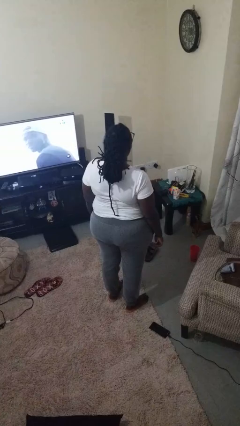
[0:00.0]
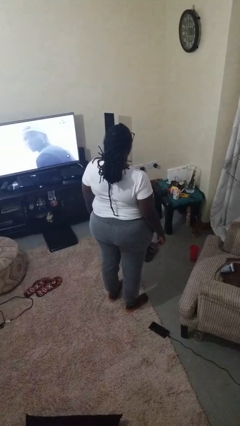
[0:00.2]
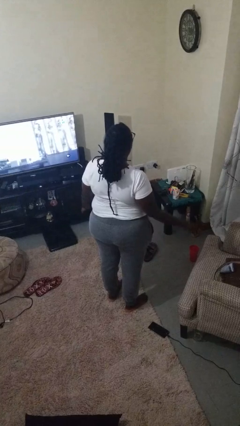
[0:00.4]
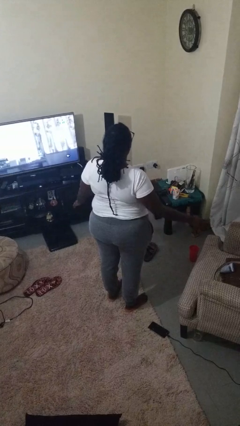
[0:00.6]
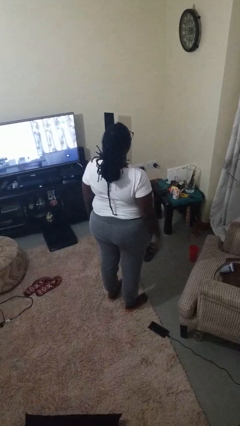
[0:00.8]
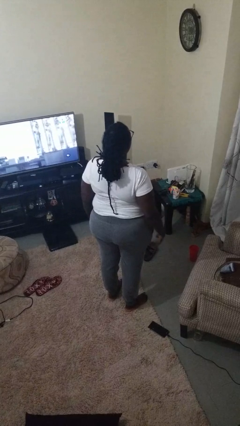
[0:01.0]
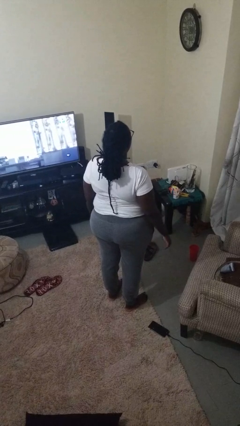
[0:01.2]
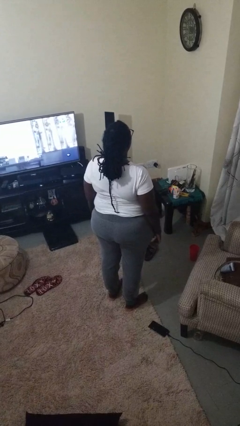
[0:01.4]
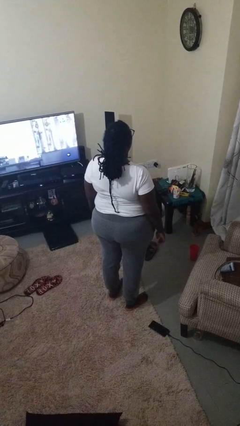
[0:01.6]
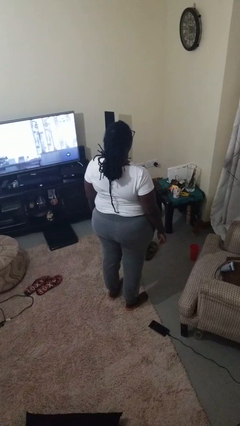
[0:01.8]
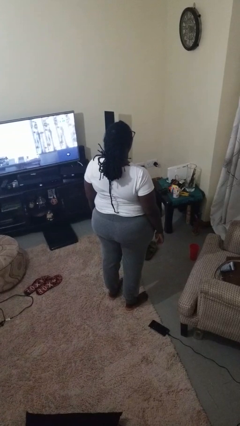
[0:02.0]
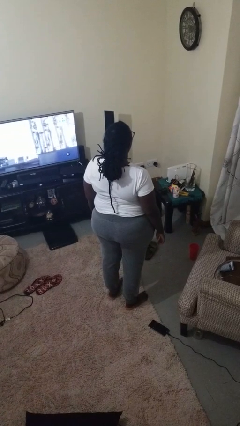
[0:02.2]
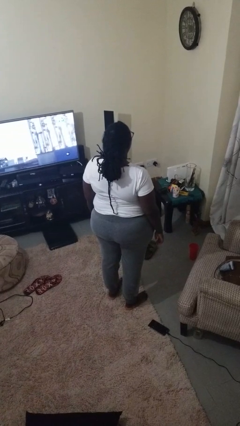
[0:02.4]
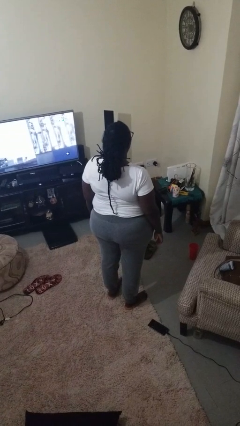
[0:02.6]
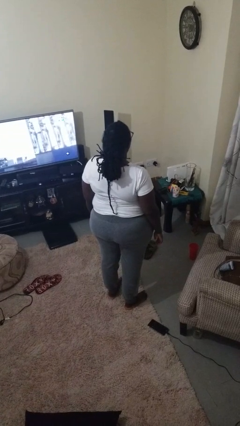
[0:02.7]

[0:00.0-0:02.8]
person slaps hands on thighs

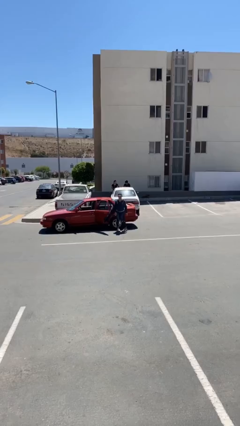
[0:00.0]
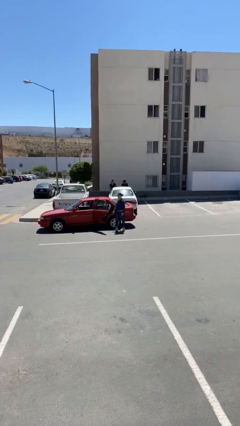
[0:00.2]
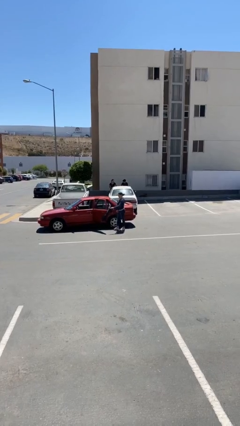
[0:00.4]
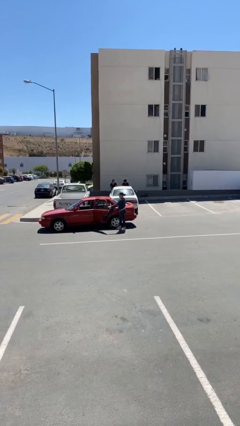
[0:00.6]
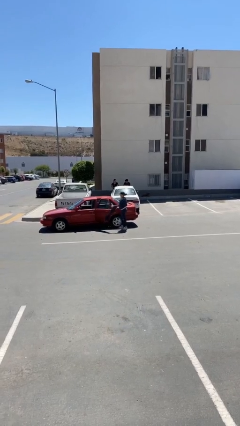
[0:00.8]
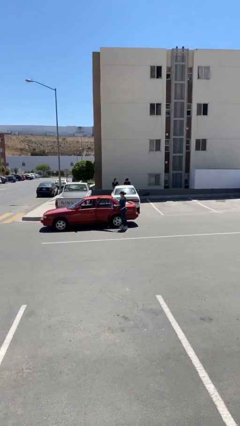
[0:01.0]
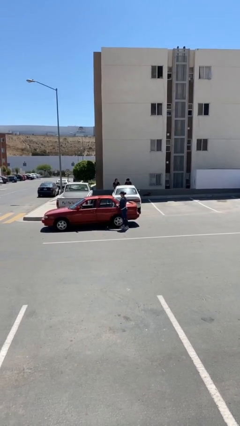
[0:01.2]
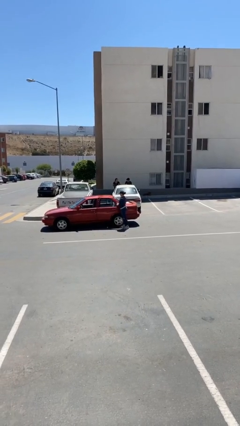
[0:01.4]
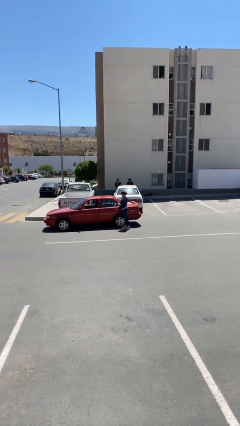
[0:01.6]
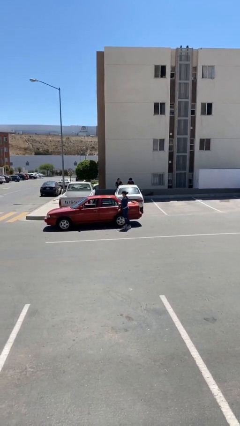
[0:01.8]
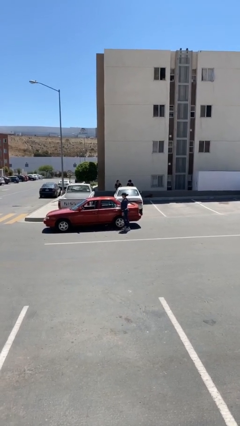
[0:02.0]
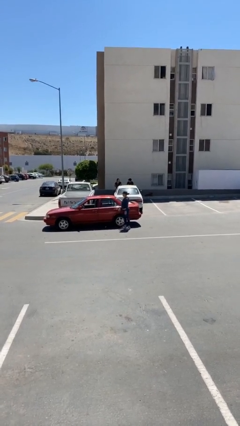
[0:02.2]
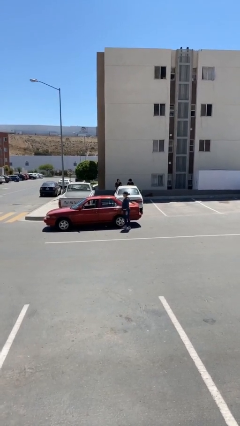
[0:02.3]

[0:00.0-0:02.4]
person closes car door

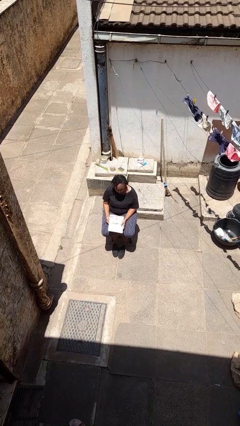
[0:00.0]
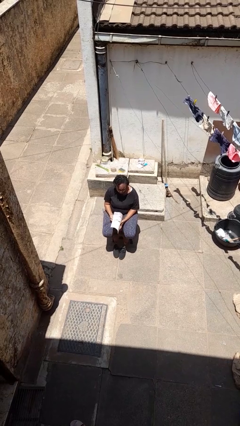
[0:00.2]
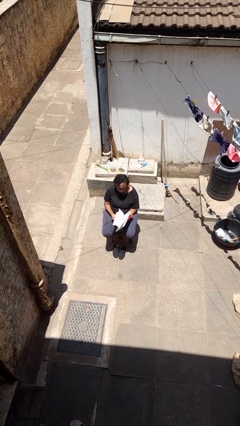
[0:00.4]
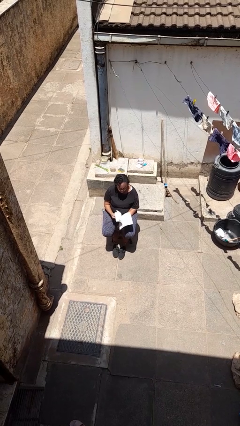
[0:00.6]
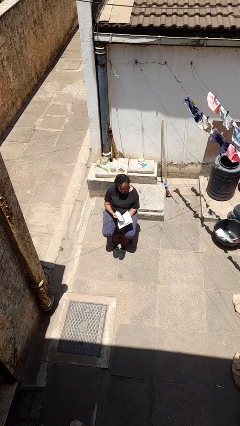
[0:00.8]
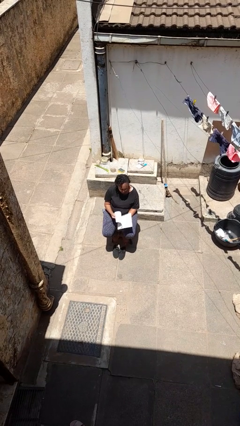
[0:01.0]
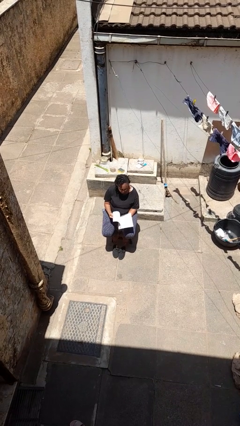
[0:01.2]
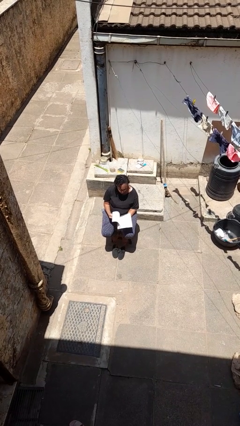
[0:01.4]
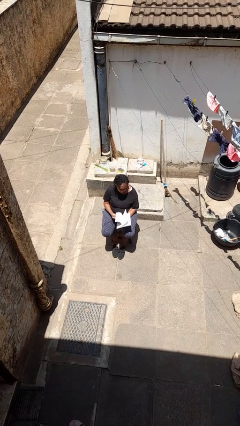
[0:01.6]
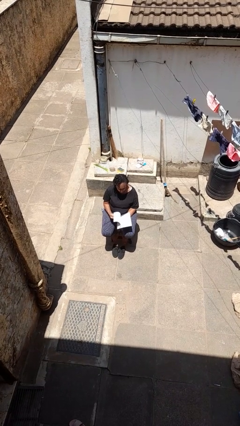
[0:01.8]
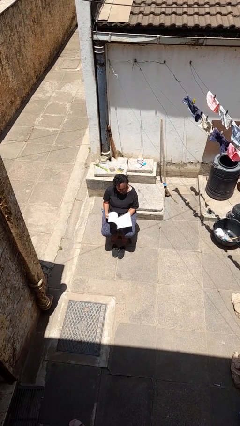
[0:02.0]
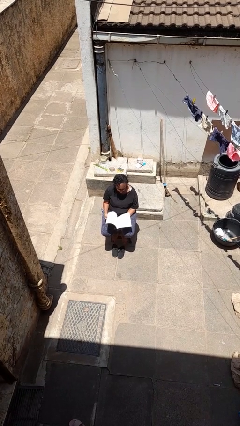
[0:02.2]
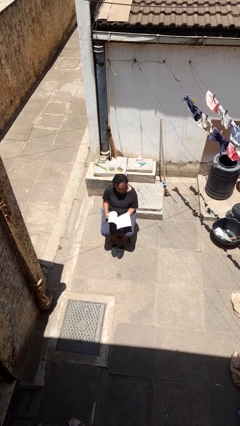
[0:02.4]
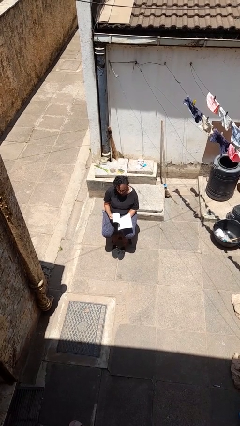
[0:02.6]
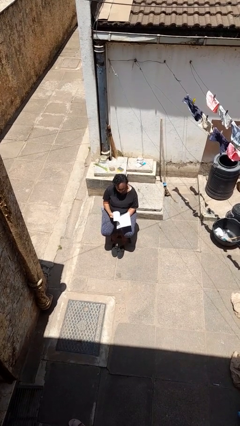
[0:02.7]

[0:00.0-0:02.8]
person reads magazine

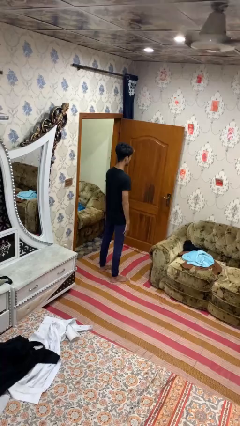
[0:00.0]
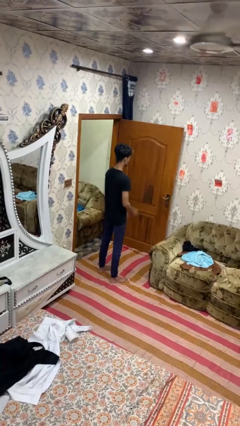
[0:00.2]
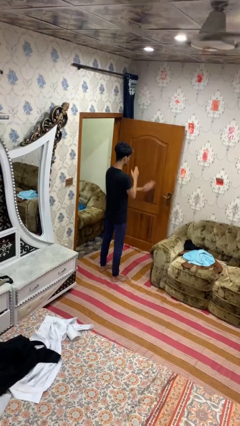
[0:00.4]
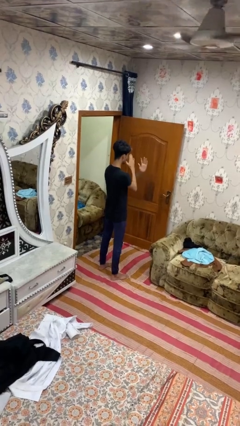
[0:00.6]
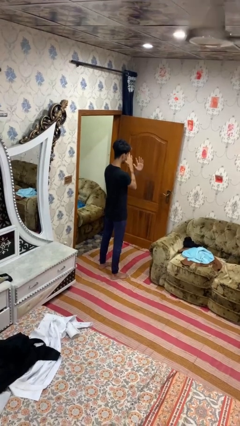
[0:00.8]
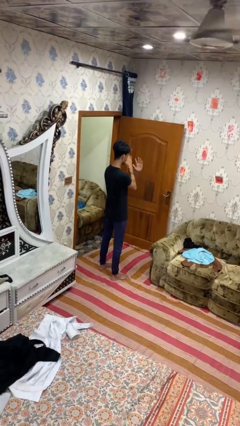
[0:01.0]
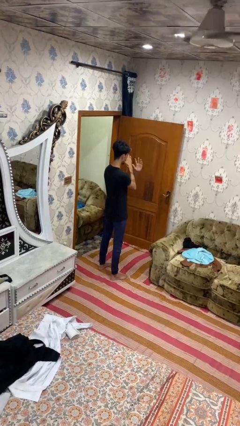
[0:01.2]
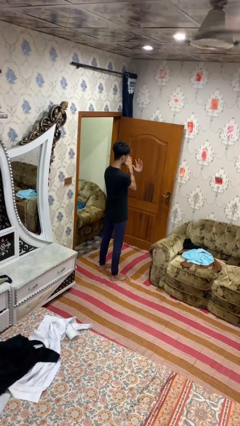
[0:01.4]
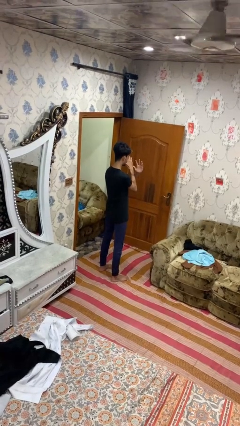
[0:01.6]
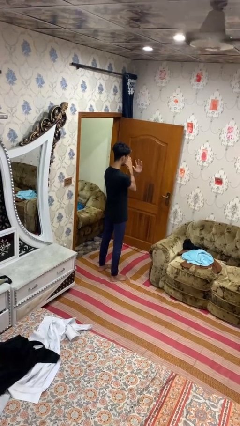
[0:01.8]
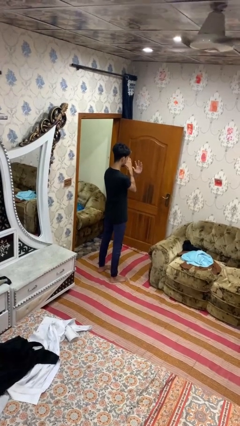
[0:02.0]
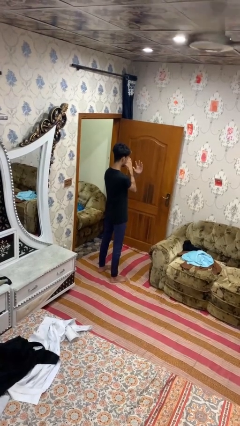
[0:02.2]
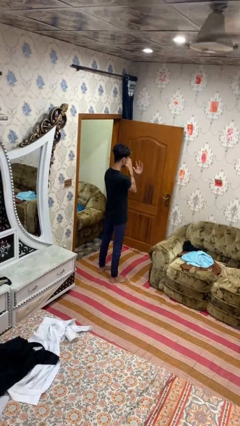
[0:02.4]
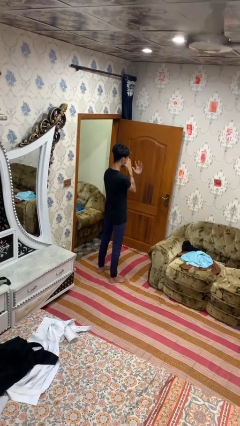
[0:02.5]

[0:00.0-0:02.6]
person gestures arms x

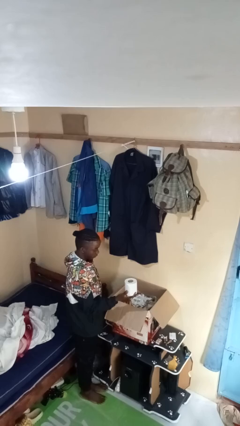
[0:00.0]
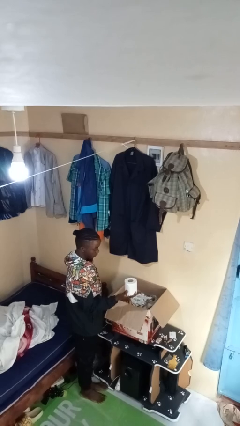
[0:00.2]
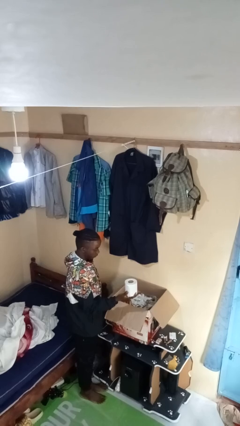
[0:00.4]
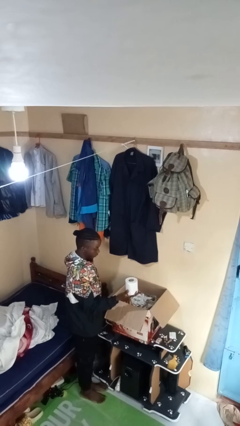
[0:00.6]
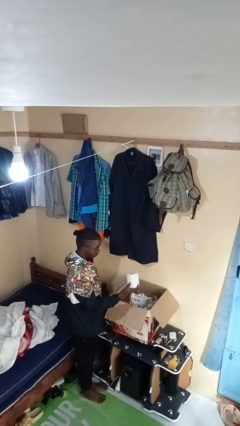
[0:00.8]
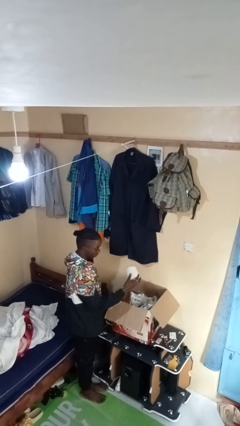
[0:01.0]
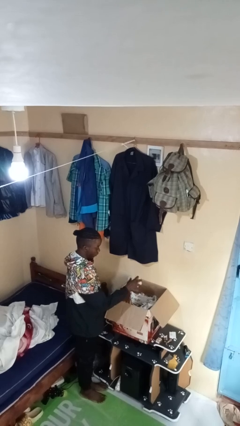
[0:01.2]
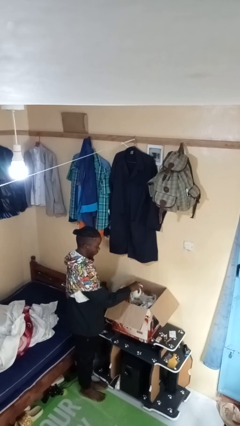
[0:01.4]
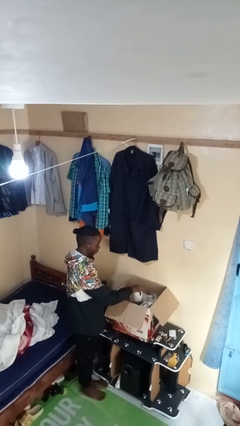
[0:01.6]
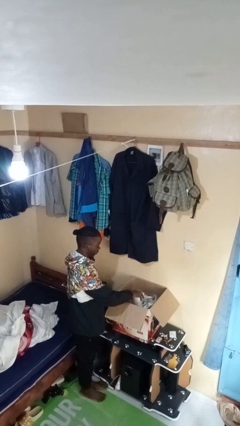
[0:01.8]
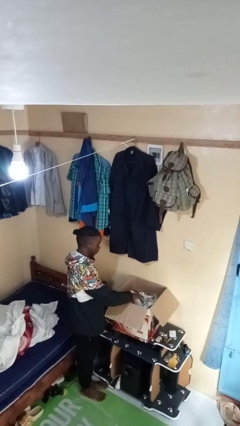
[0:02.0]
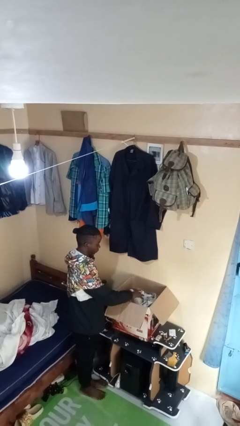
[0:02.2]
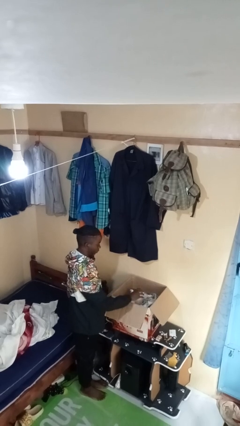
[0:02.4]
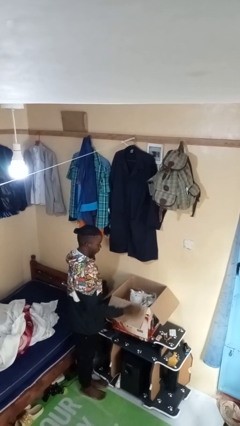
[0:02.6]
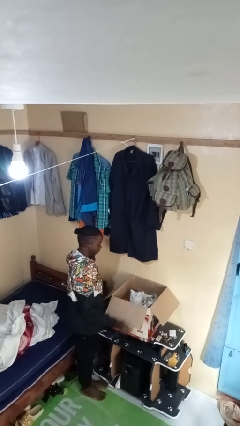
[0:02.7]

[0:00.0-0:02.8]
person puts object into box

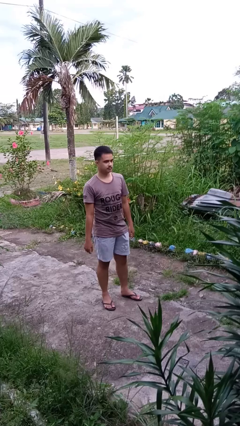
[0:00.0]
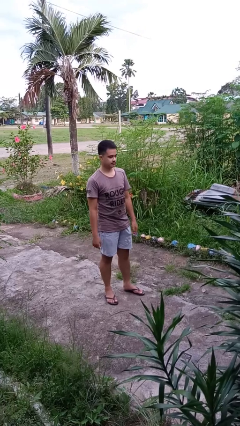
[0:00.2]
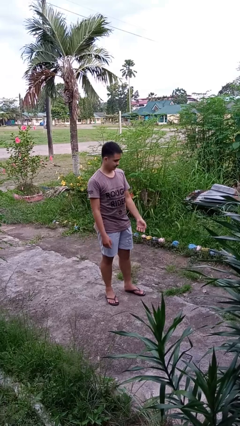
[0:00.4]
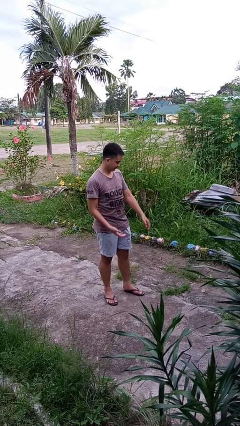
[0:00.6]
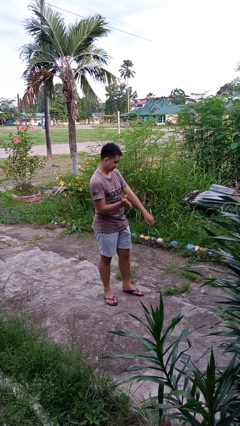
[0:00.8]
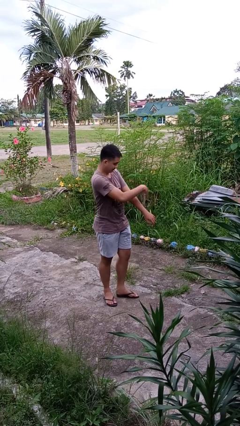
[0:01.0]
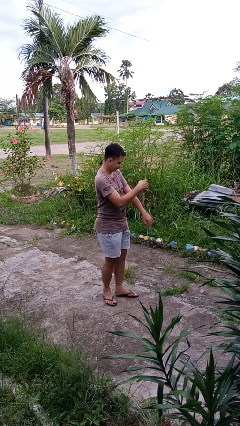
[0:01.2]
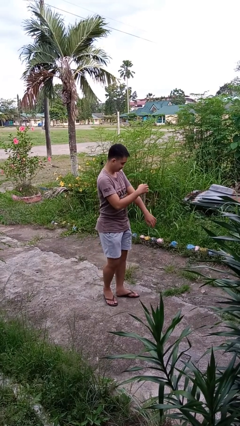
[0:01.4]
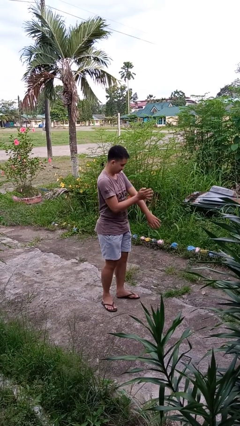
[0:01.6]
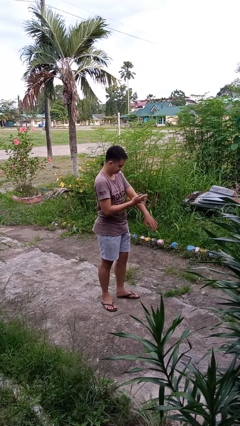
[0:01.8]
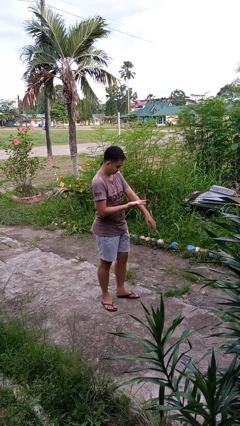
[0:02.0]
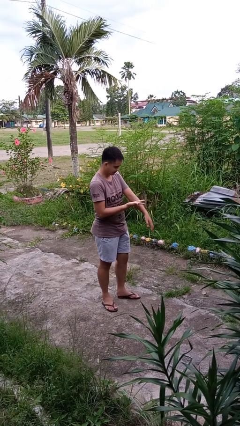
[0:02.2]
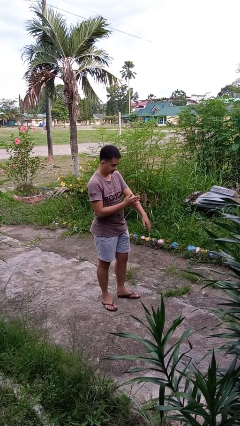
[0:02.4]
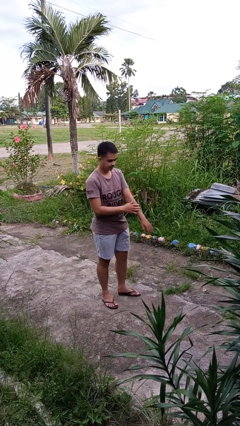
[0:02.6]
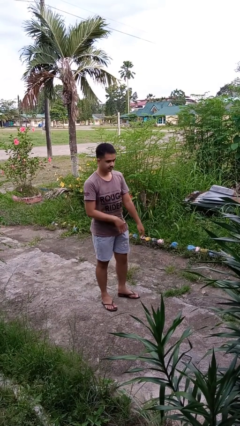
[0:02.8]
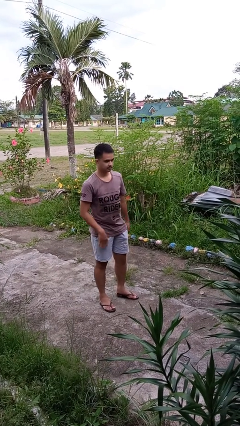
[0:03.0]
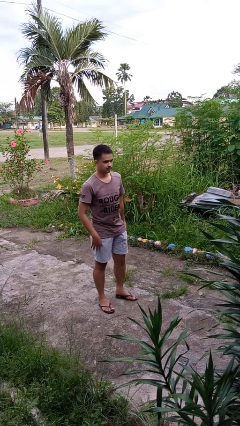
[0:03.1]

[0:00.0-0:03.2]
person swats bug

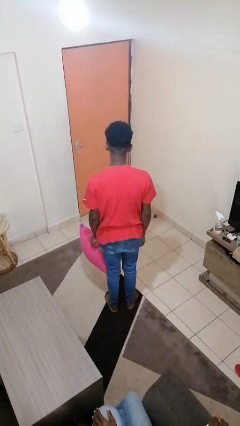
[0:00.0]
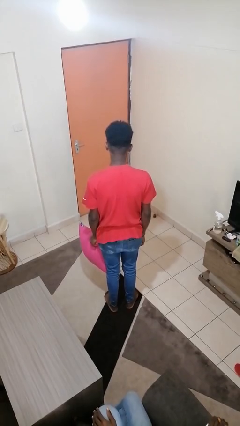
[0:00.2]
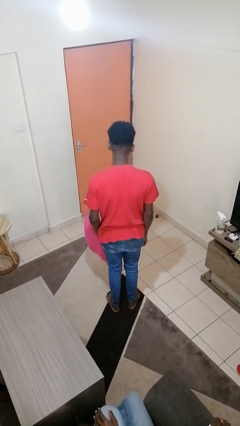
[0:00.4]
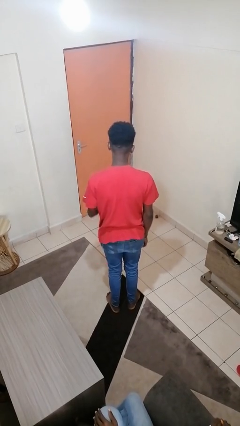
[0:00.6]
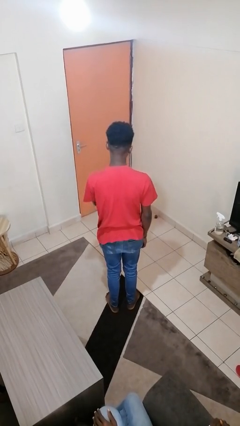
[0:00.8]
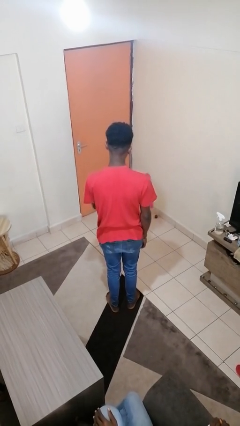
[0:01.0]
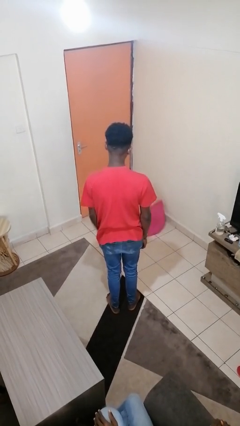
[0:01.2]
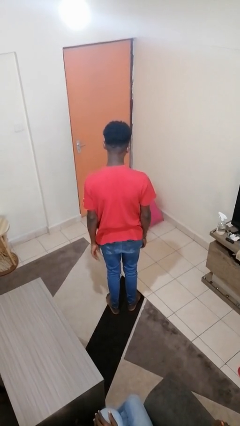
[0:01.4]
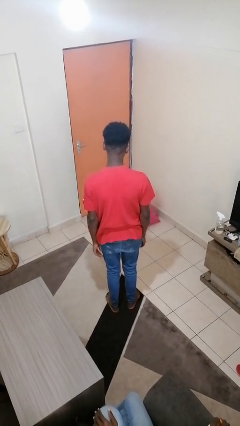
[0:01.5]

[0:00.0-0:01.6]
person throws object to ground
